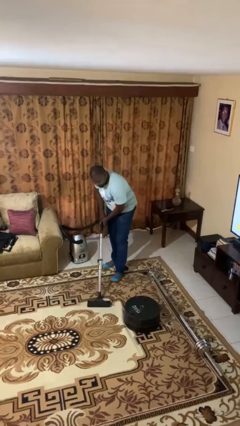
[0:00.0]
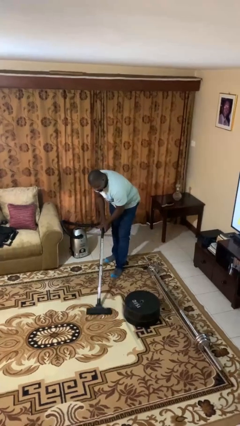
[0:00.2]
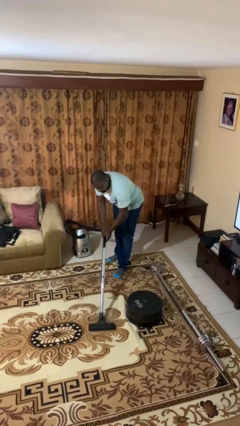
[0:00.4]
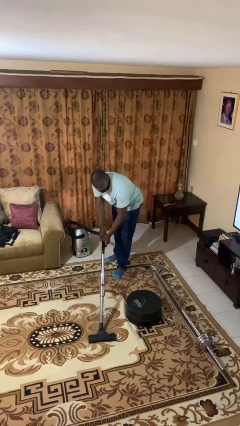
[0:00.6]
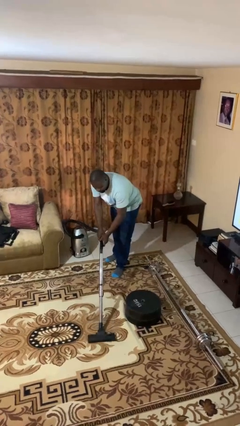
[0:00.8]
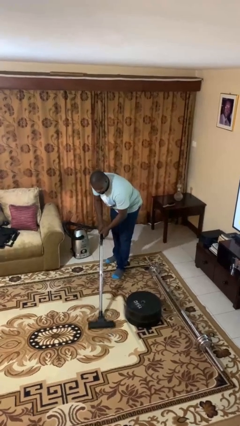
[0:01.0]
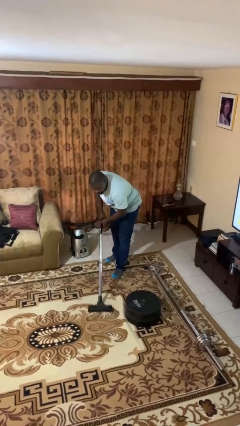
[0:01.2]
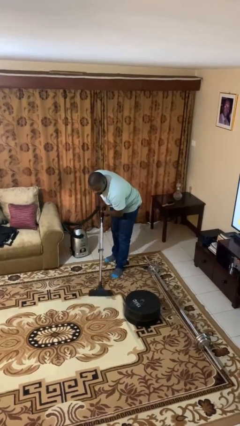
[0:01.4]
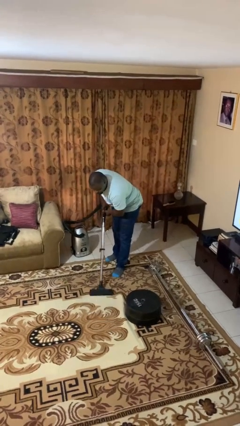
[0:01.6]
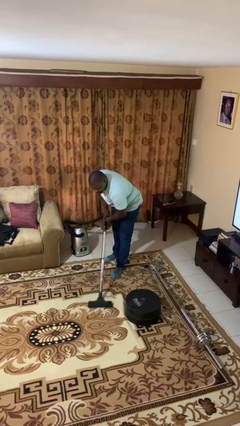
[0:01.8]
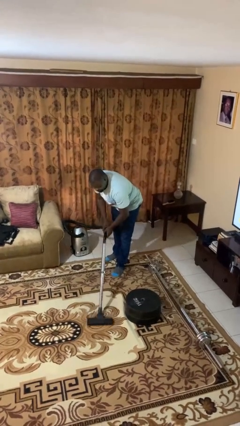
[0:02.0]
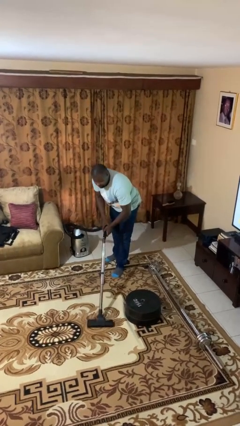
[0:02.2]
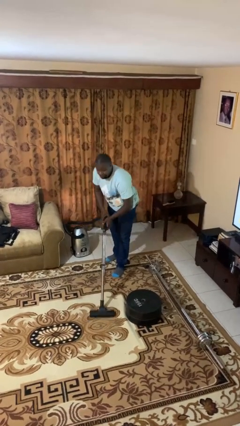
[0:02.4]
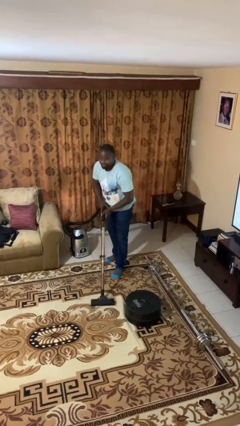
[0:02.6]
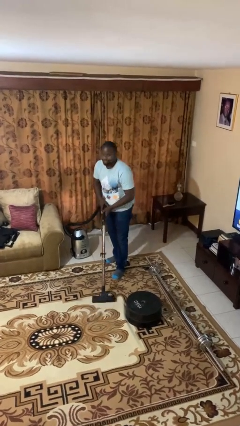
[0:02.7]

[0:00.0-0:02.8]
person vacuums carpet

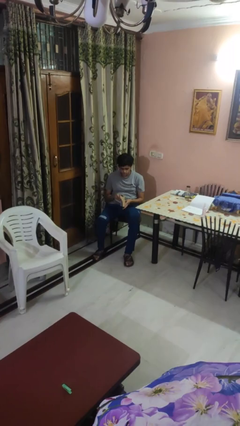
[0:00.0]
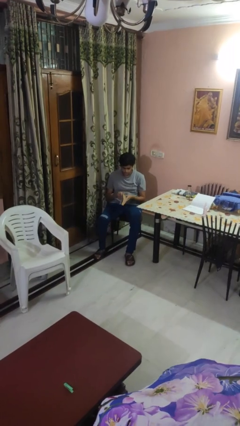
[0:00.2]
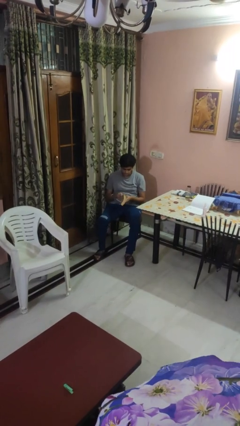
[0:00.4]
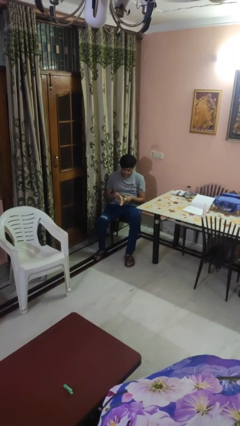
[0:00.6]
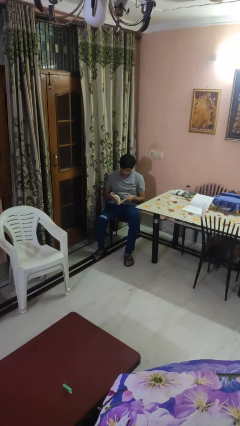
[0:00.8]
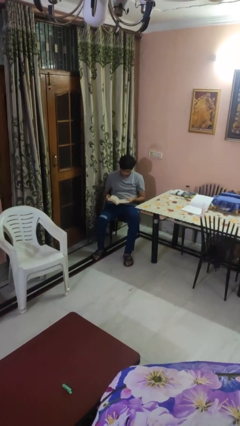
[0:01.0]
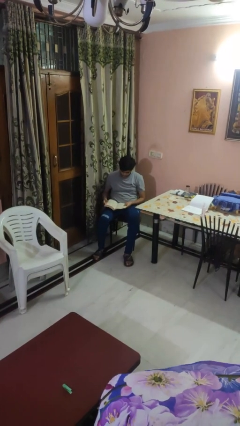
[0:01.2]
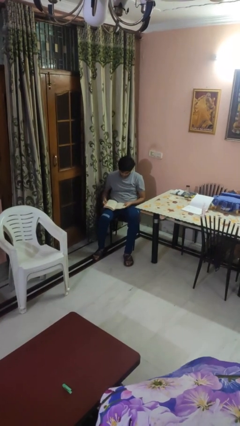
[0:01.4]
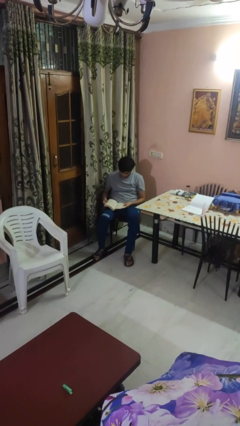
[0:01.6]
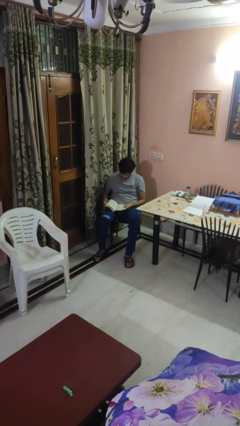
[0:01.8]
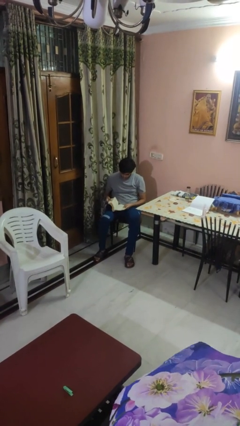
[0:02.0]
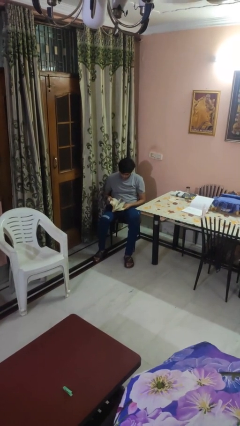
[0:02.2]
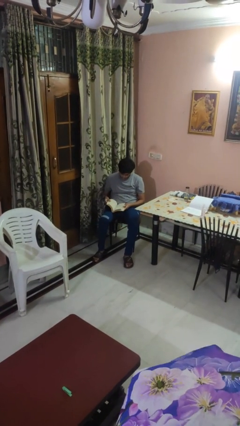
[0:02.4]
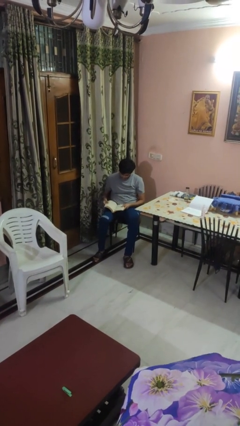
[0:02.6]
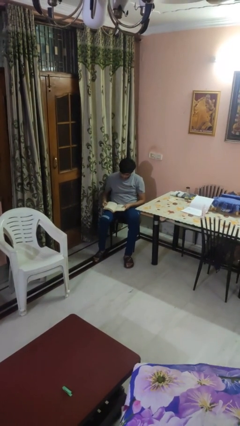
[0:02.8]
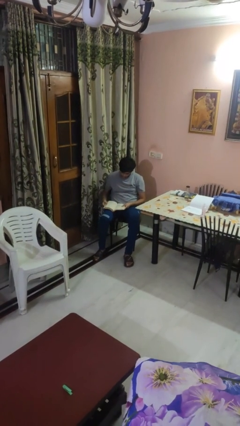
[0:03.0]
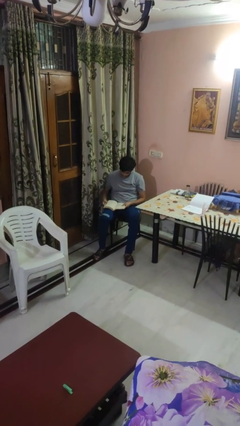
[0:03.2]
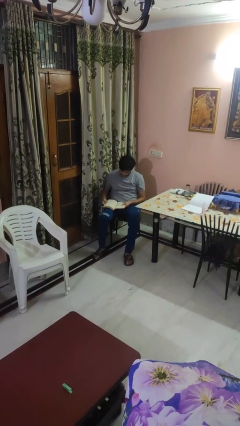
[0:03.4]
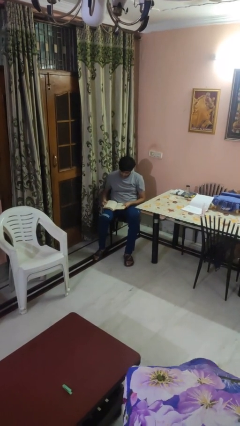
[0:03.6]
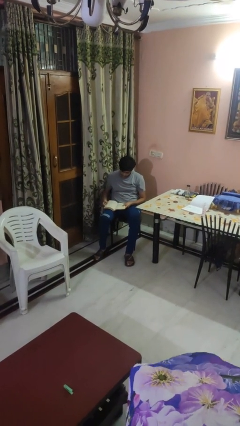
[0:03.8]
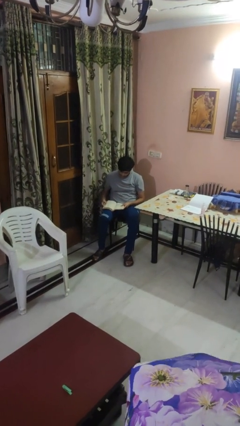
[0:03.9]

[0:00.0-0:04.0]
person reads book

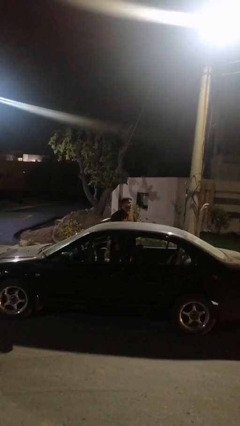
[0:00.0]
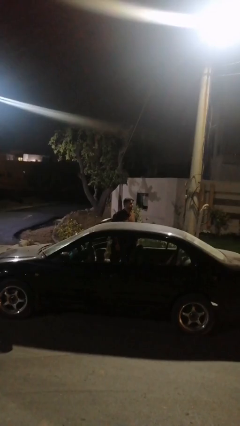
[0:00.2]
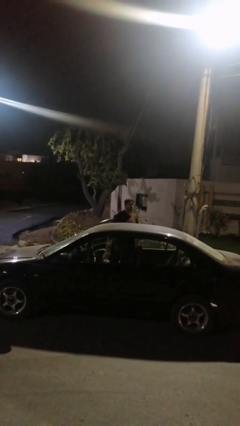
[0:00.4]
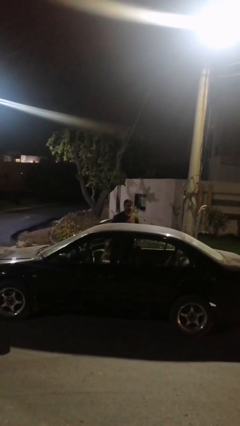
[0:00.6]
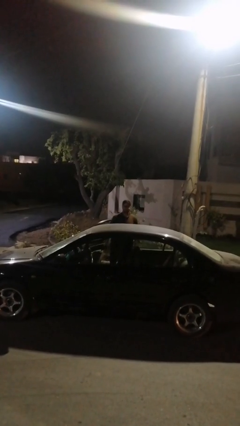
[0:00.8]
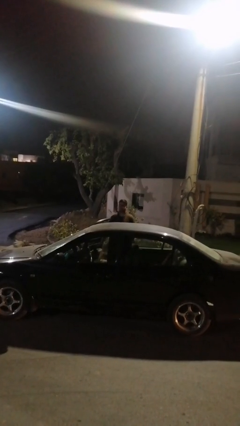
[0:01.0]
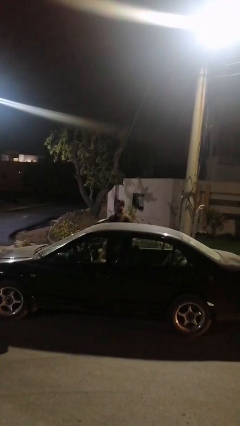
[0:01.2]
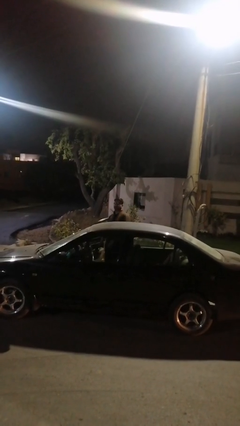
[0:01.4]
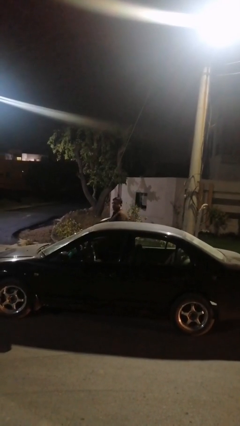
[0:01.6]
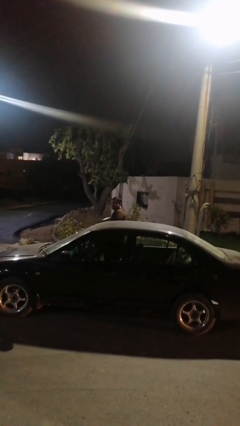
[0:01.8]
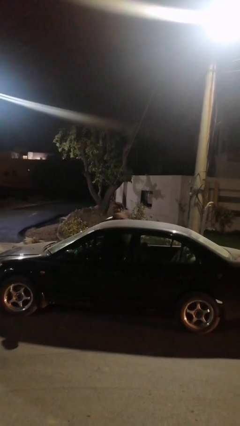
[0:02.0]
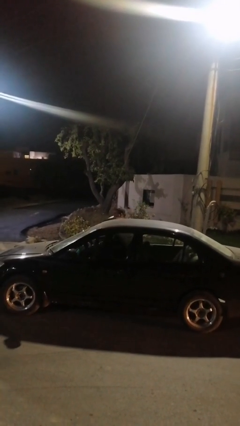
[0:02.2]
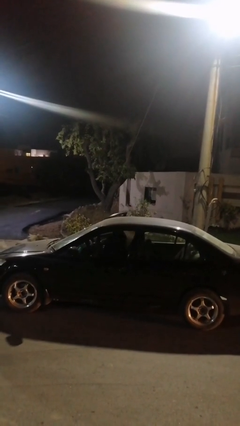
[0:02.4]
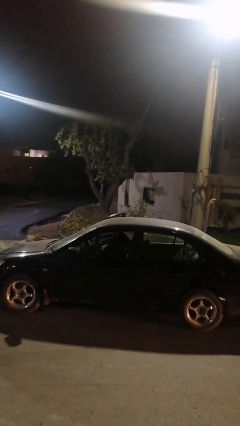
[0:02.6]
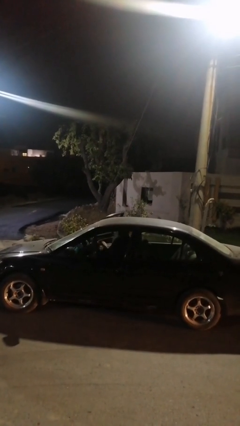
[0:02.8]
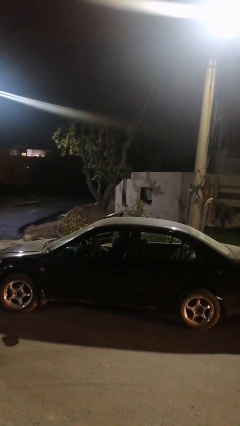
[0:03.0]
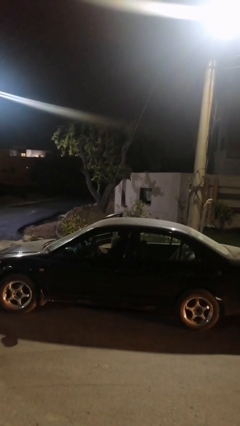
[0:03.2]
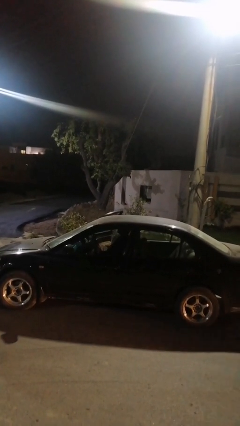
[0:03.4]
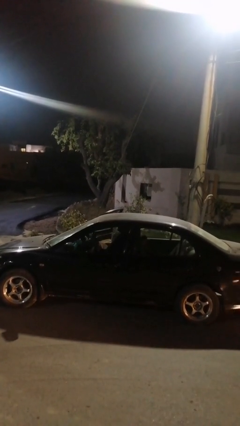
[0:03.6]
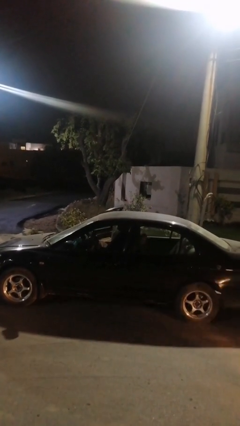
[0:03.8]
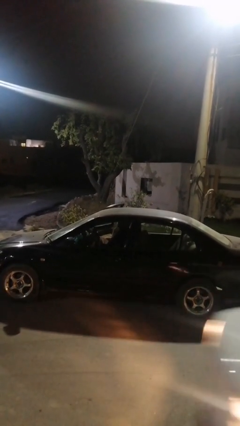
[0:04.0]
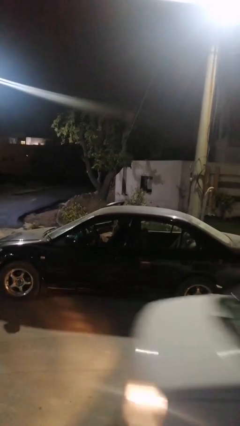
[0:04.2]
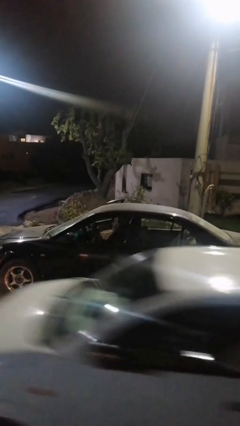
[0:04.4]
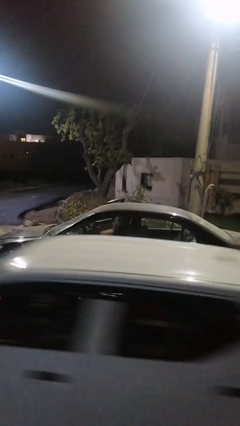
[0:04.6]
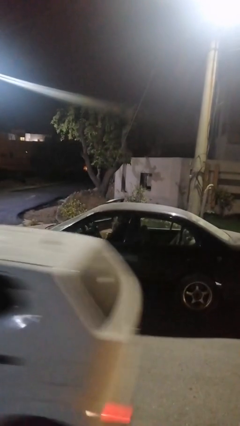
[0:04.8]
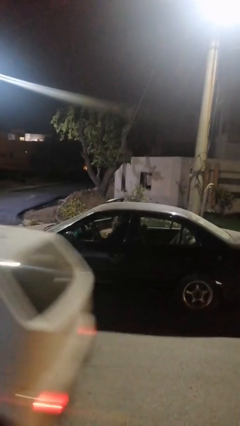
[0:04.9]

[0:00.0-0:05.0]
person enters car

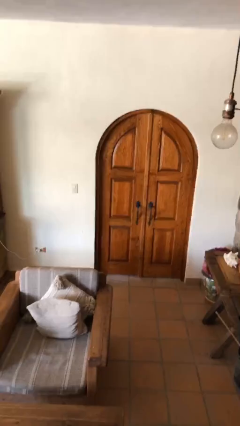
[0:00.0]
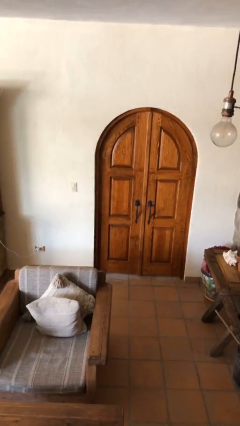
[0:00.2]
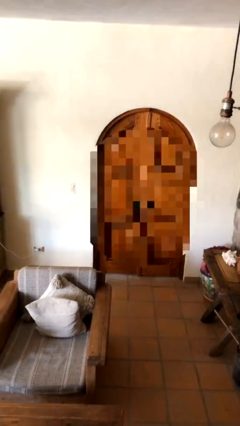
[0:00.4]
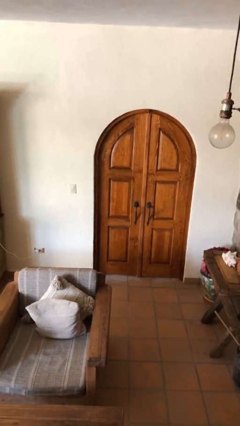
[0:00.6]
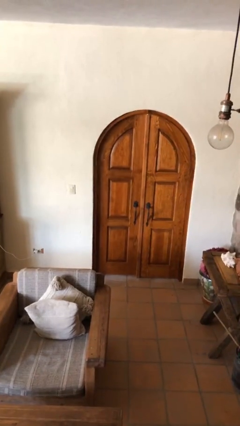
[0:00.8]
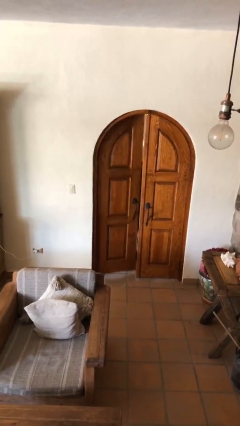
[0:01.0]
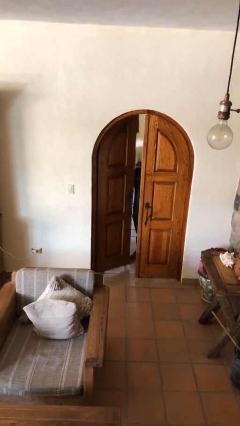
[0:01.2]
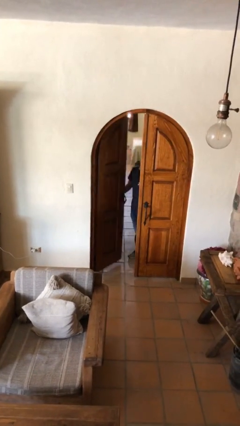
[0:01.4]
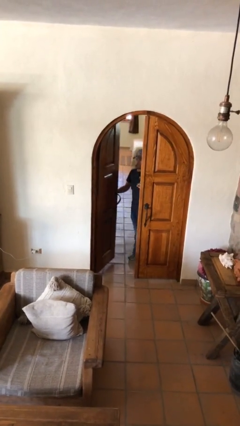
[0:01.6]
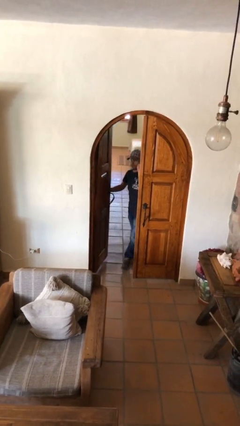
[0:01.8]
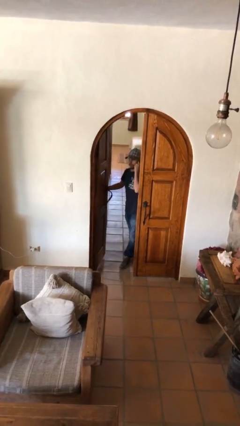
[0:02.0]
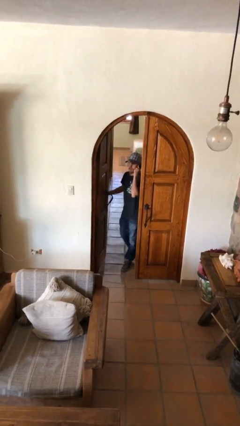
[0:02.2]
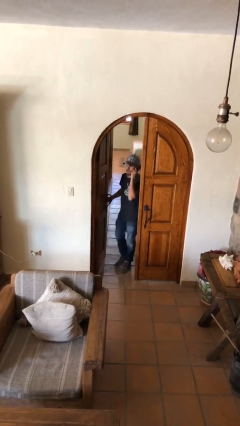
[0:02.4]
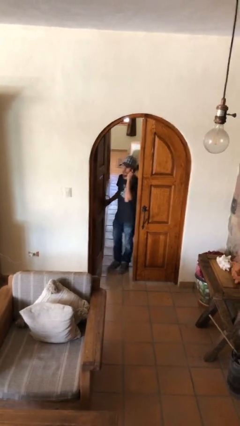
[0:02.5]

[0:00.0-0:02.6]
person opens facility door

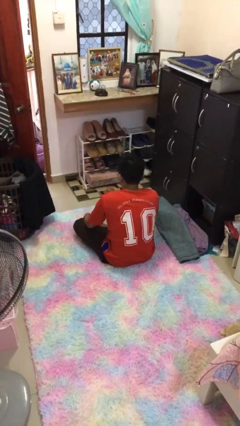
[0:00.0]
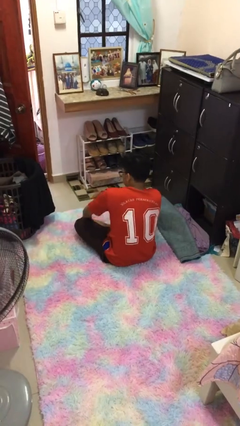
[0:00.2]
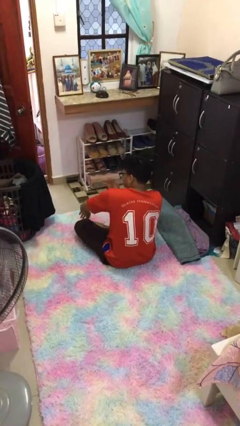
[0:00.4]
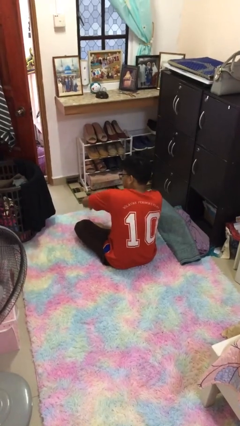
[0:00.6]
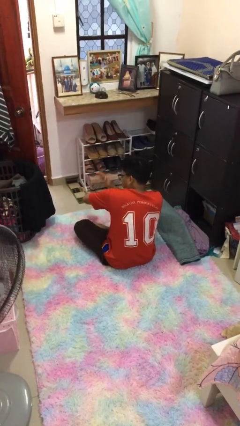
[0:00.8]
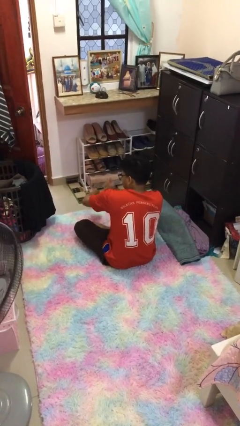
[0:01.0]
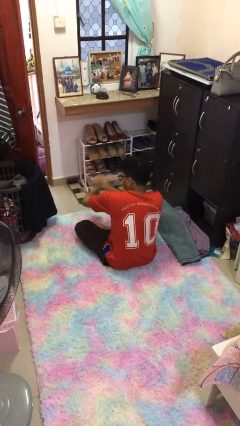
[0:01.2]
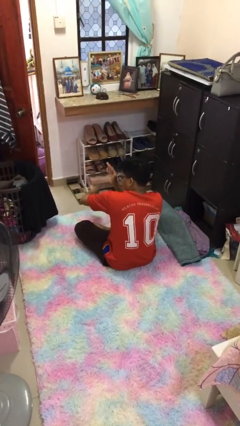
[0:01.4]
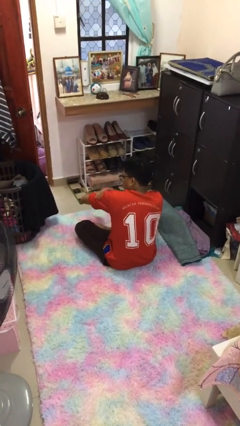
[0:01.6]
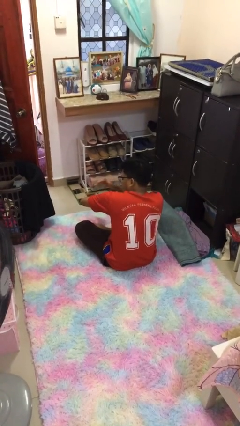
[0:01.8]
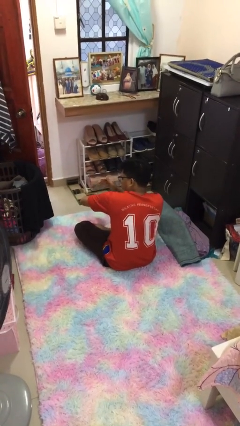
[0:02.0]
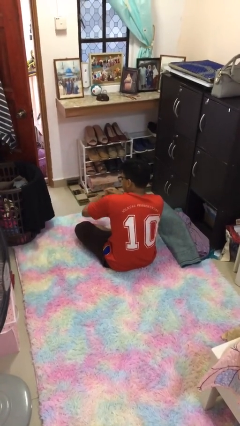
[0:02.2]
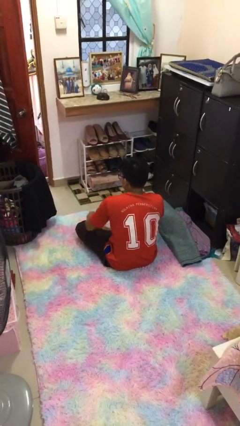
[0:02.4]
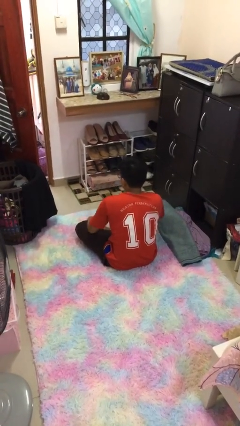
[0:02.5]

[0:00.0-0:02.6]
person swats bug

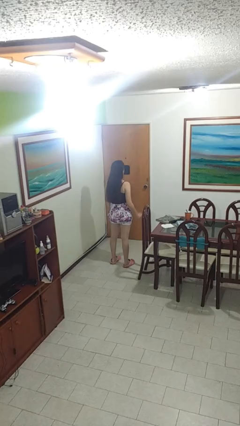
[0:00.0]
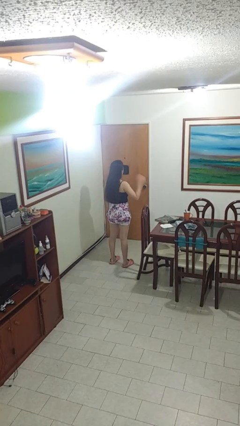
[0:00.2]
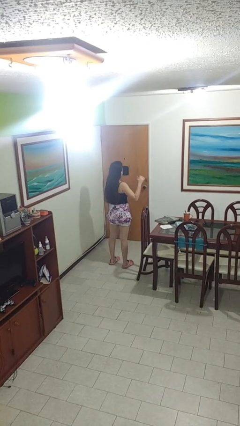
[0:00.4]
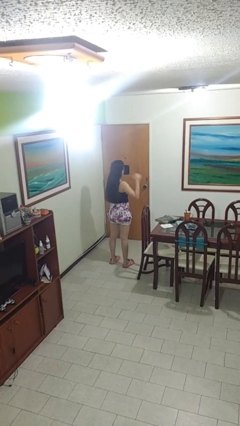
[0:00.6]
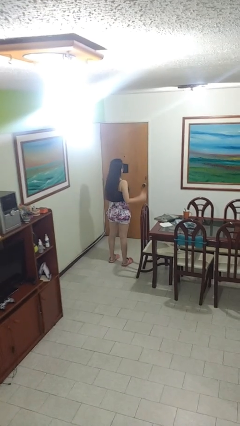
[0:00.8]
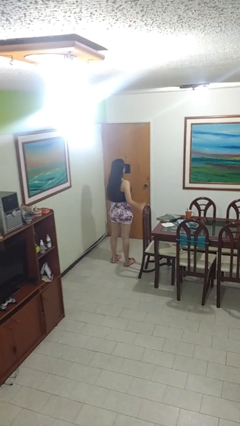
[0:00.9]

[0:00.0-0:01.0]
person gestures behind me
